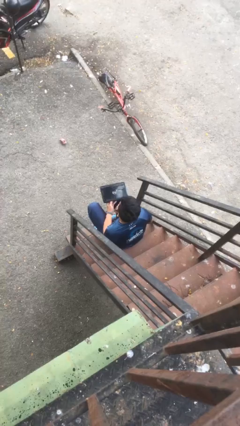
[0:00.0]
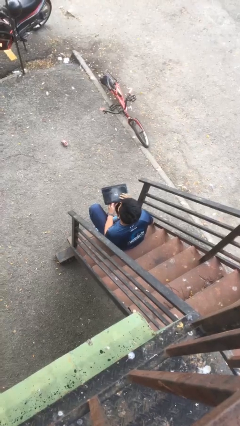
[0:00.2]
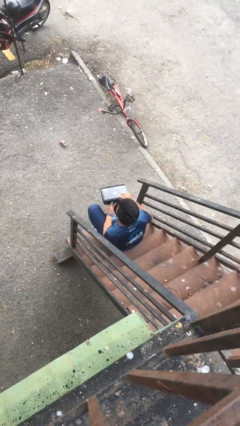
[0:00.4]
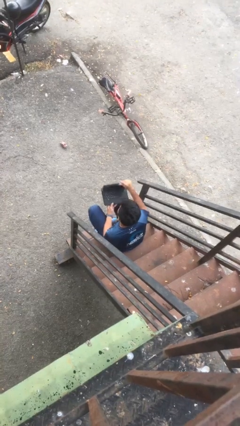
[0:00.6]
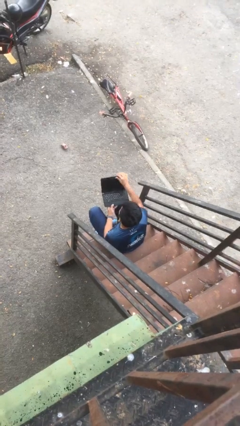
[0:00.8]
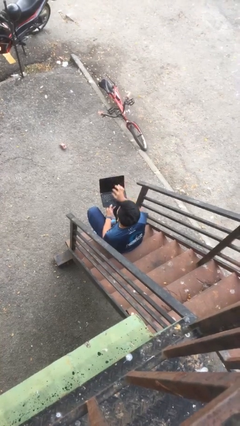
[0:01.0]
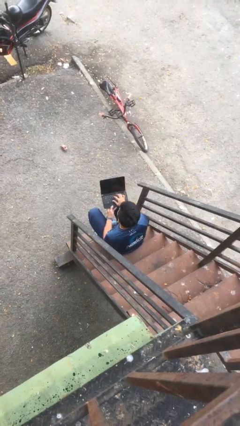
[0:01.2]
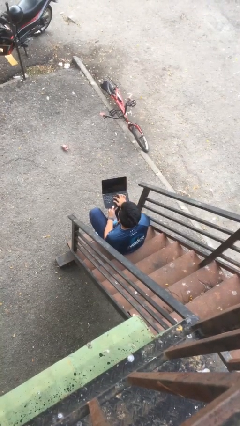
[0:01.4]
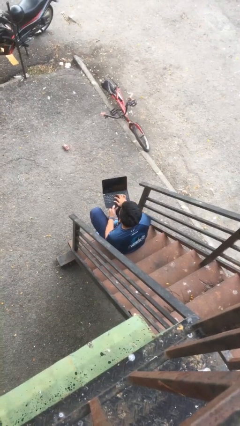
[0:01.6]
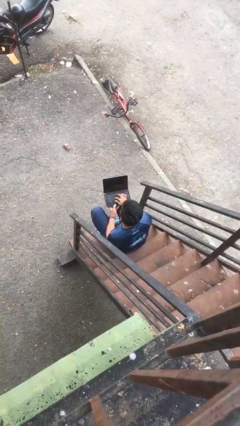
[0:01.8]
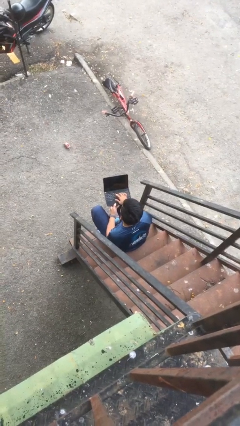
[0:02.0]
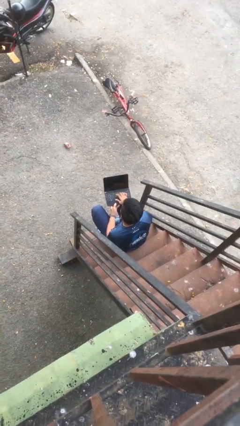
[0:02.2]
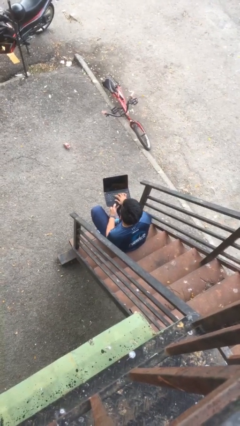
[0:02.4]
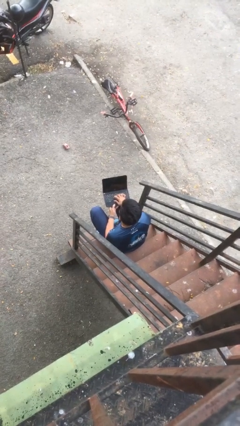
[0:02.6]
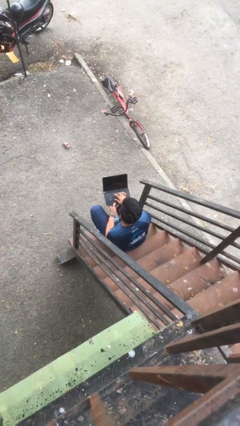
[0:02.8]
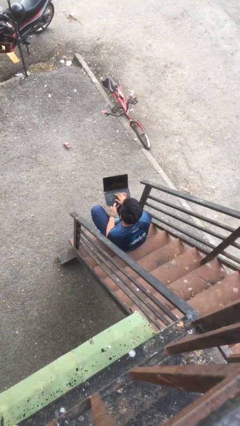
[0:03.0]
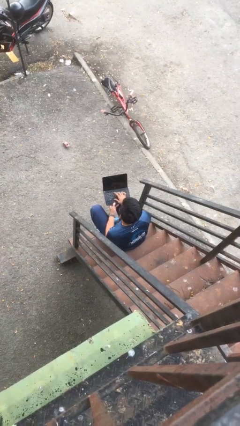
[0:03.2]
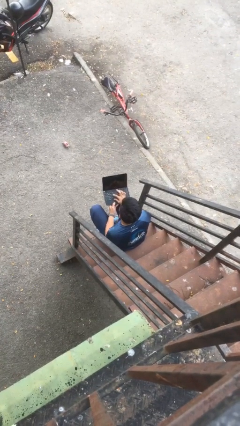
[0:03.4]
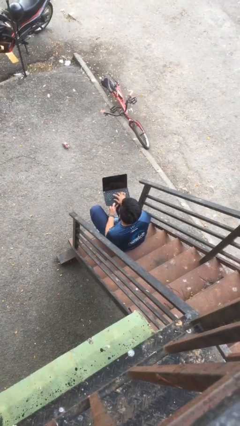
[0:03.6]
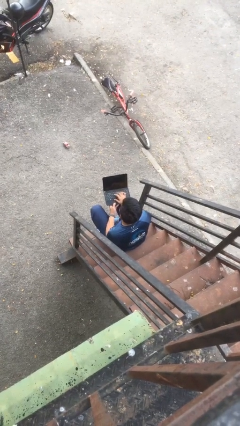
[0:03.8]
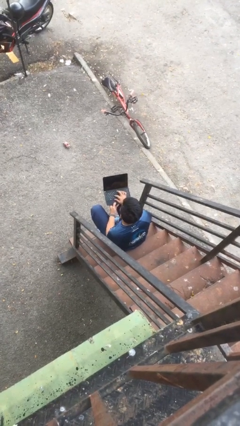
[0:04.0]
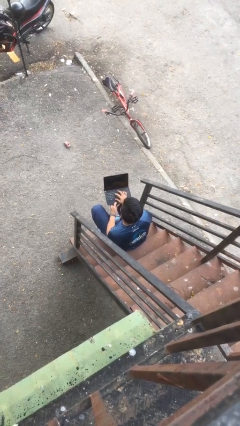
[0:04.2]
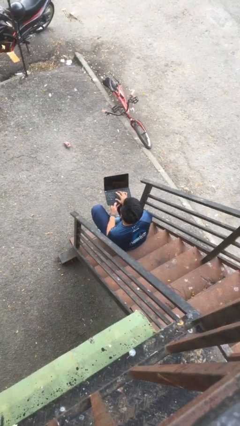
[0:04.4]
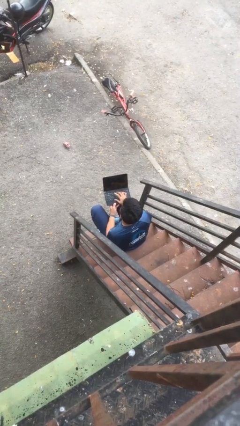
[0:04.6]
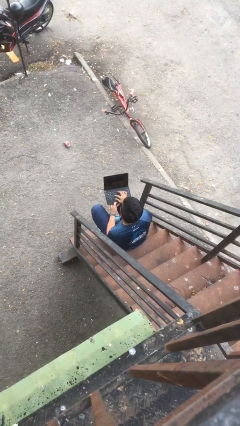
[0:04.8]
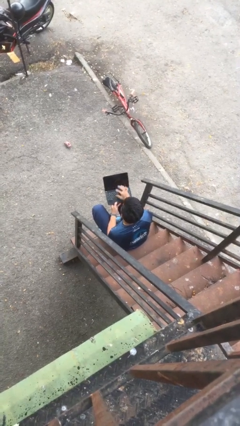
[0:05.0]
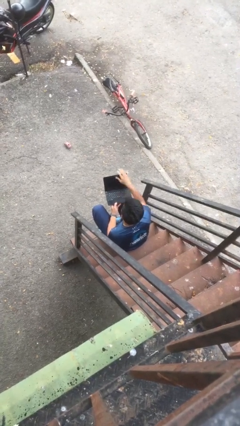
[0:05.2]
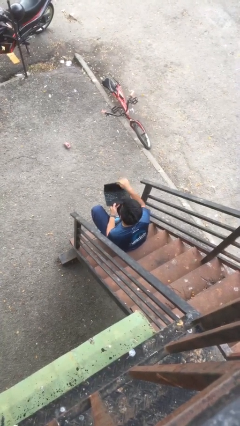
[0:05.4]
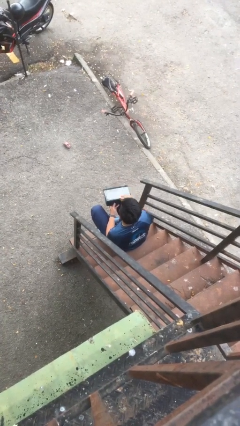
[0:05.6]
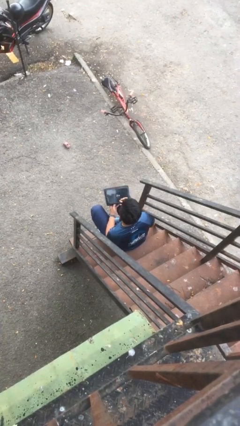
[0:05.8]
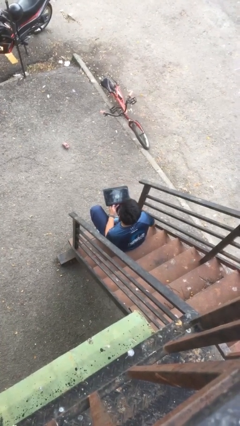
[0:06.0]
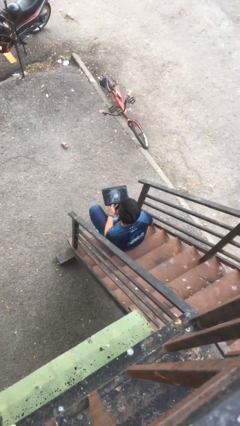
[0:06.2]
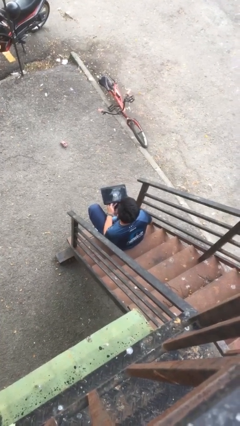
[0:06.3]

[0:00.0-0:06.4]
person interacts with laptop

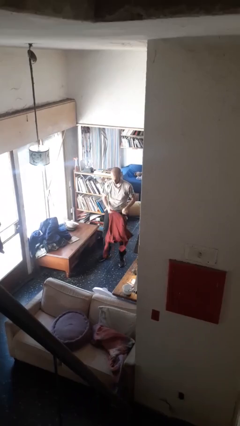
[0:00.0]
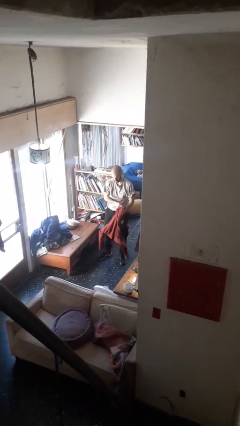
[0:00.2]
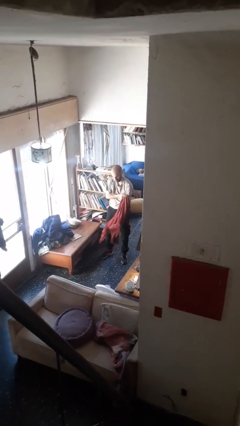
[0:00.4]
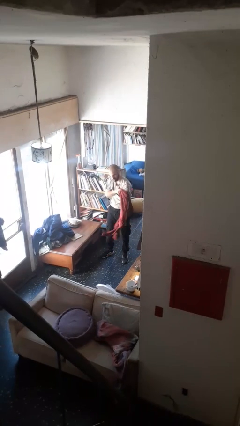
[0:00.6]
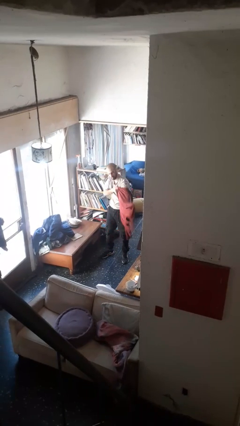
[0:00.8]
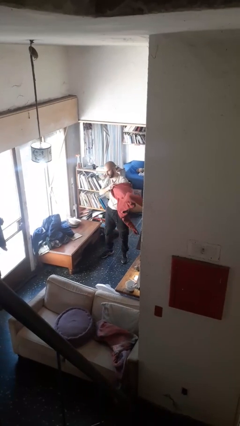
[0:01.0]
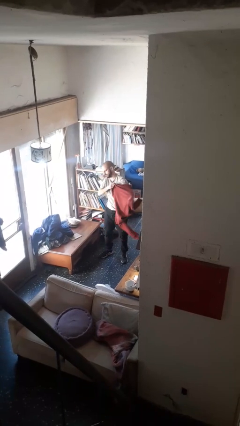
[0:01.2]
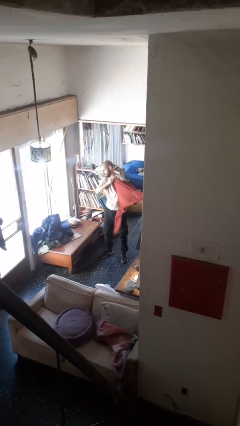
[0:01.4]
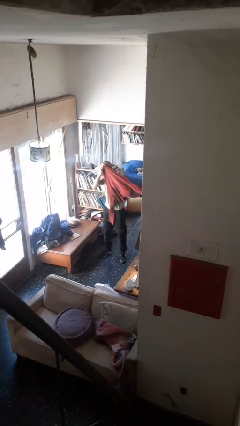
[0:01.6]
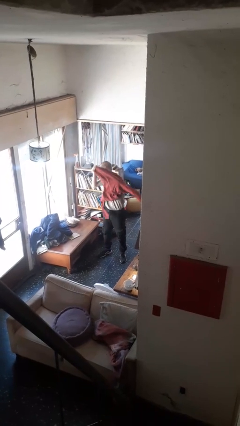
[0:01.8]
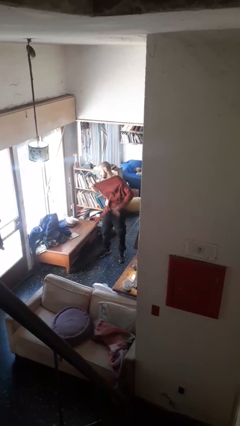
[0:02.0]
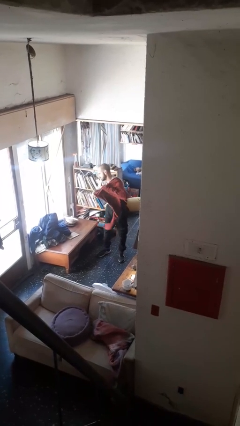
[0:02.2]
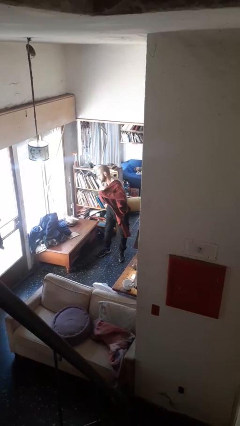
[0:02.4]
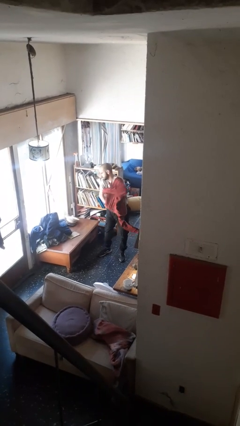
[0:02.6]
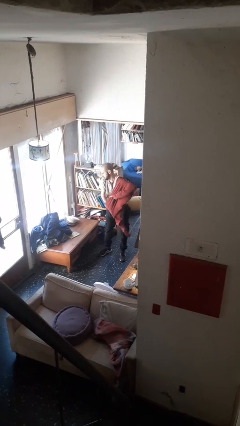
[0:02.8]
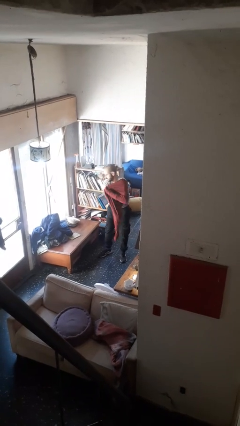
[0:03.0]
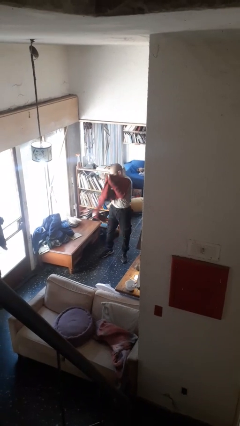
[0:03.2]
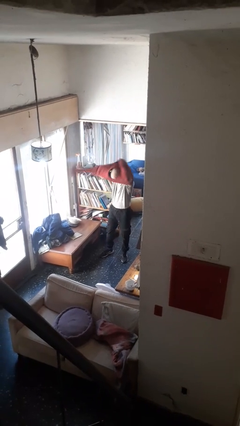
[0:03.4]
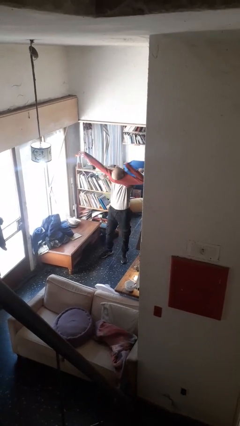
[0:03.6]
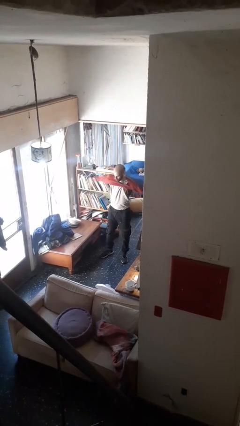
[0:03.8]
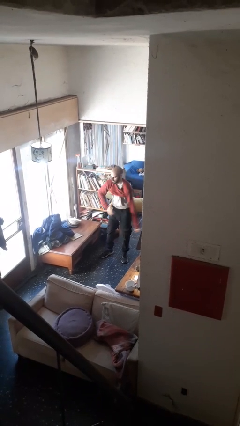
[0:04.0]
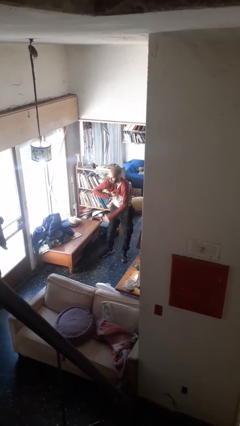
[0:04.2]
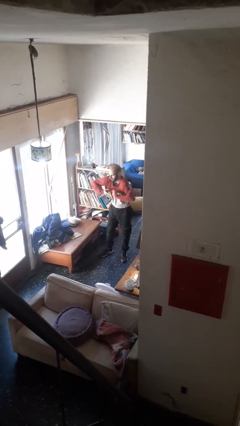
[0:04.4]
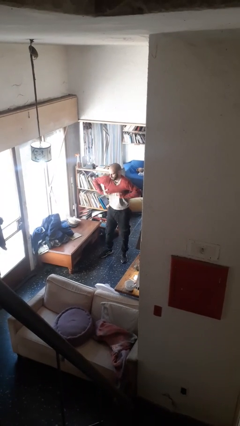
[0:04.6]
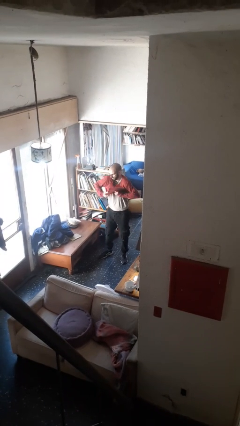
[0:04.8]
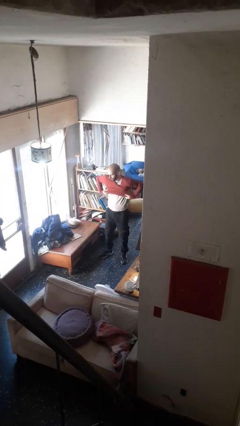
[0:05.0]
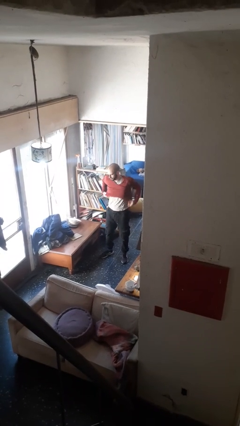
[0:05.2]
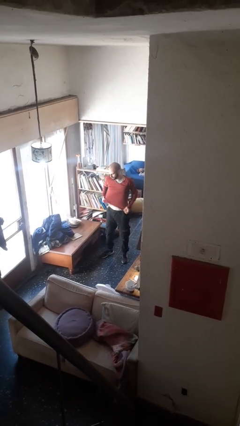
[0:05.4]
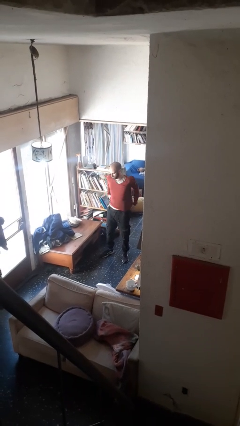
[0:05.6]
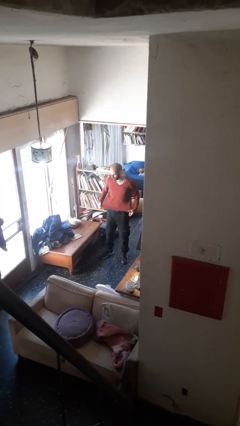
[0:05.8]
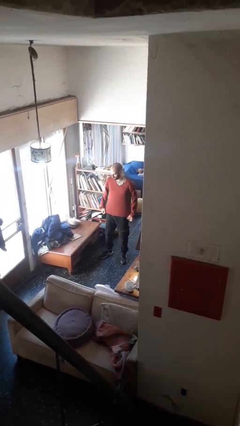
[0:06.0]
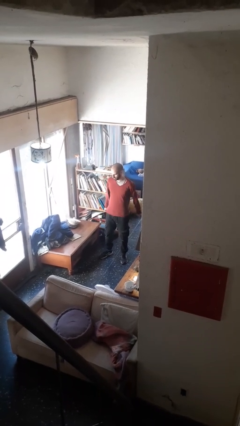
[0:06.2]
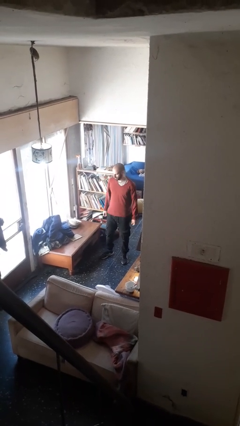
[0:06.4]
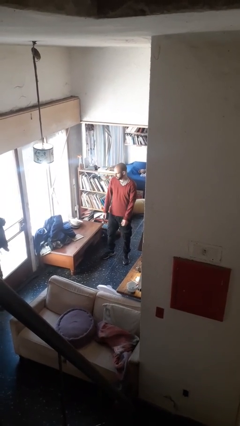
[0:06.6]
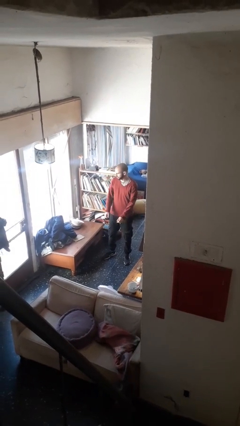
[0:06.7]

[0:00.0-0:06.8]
person puts on shirt

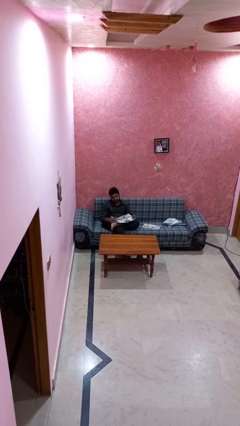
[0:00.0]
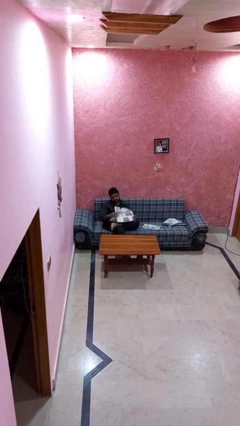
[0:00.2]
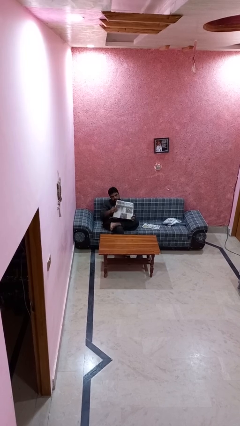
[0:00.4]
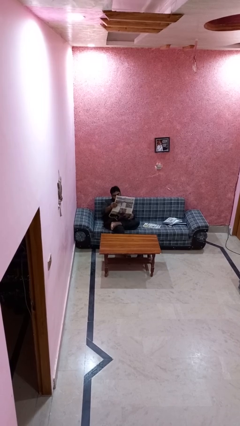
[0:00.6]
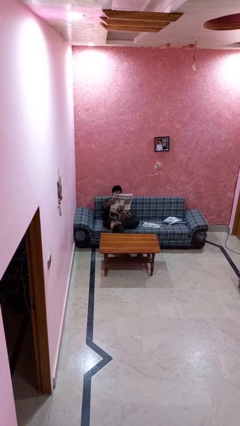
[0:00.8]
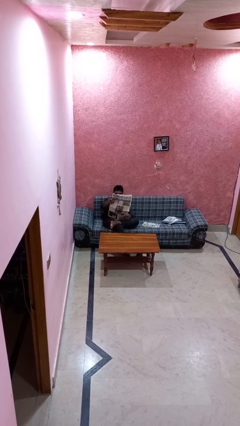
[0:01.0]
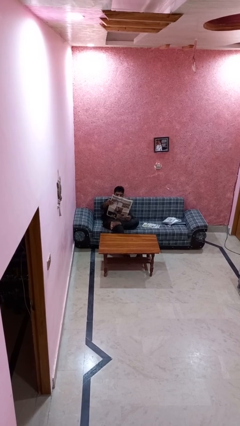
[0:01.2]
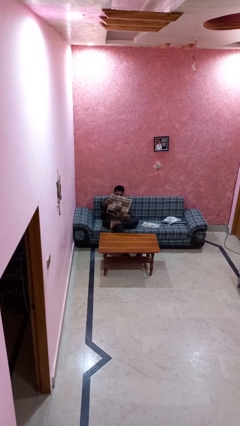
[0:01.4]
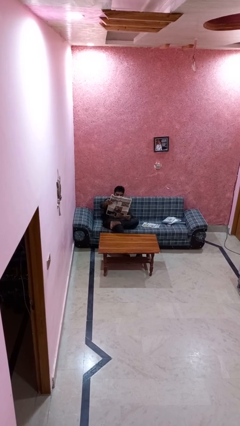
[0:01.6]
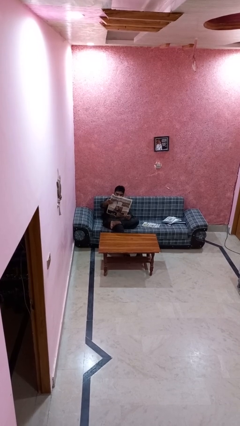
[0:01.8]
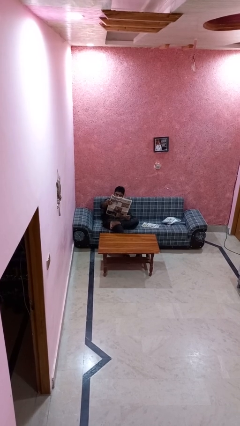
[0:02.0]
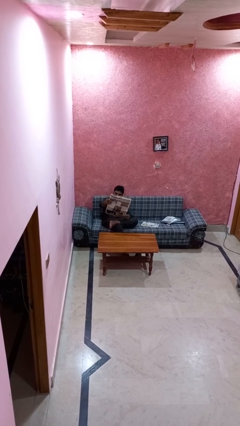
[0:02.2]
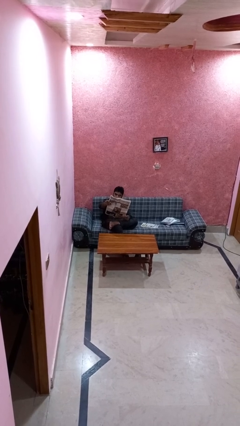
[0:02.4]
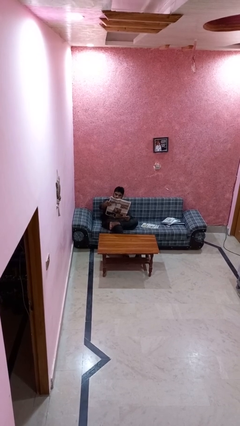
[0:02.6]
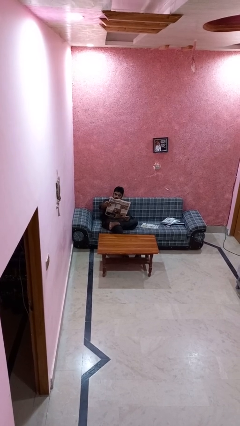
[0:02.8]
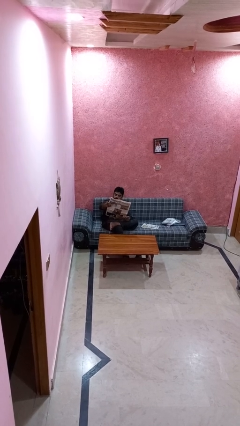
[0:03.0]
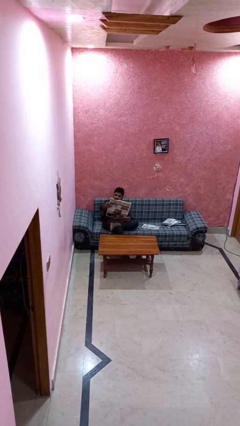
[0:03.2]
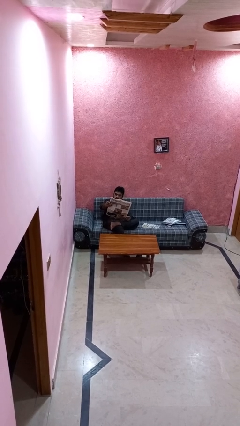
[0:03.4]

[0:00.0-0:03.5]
person reads newspaper

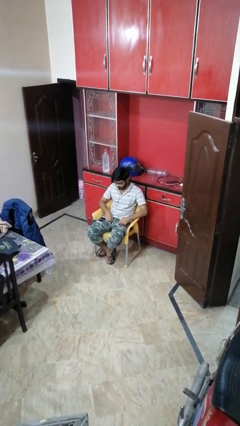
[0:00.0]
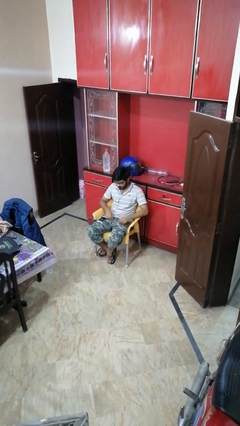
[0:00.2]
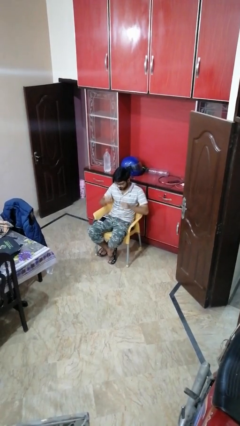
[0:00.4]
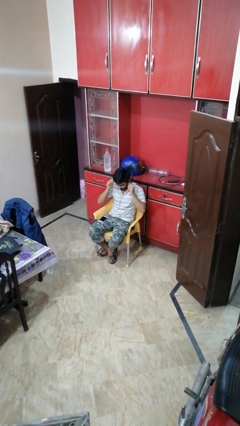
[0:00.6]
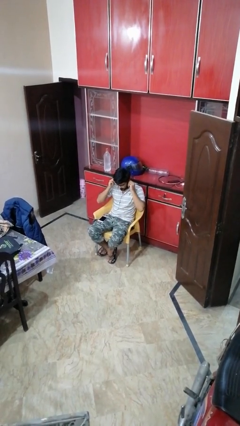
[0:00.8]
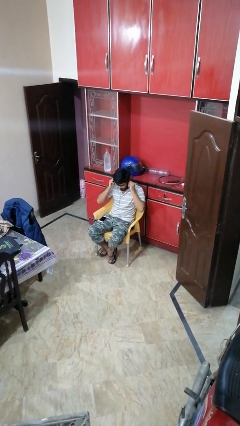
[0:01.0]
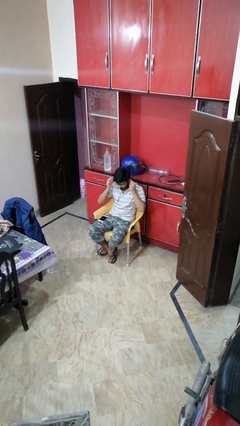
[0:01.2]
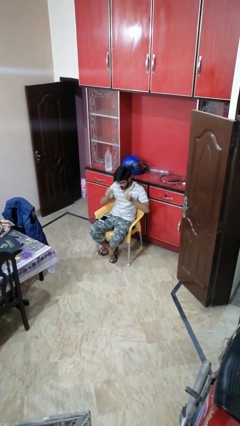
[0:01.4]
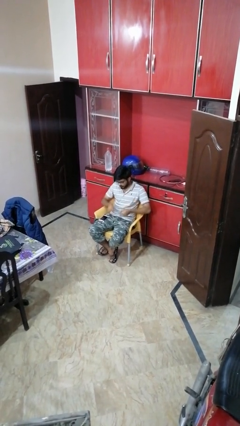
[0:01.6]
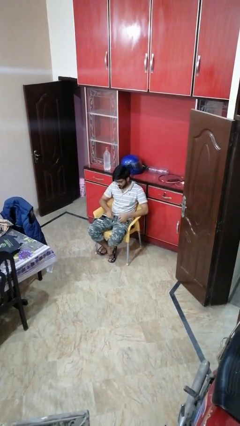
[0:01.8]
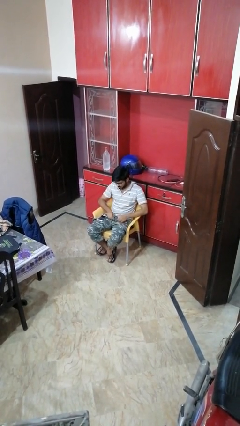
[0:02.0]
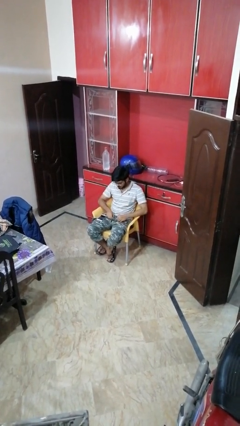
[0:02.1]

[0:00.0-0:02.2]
person takes off headphones
